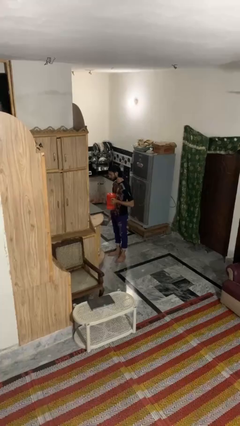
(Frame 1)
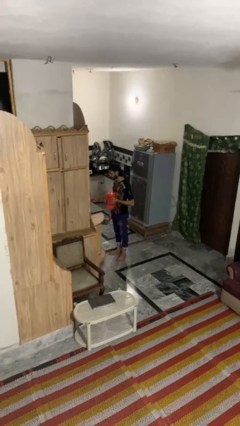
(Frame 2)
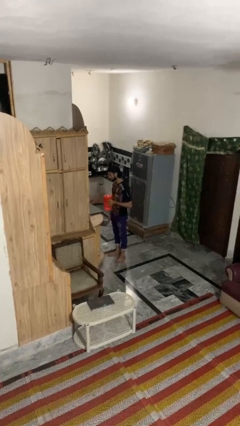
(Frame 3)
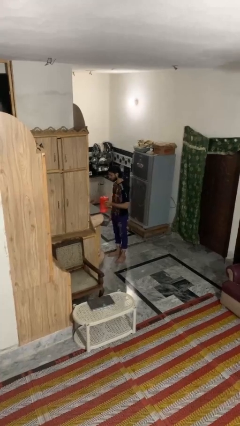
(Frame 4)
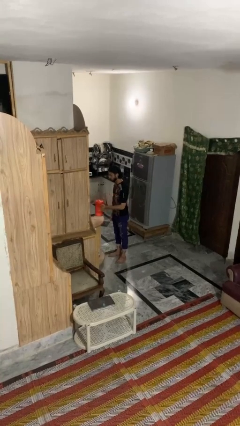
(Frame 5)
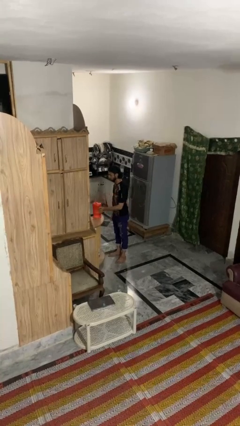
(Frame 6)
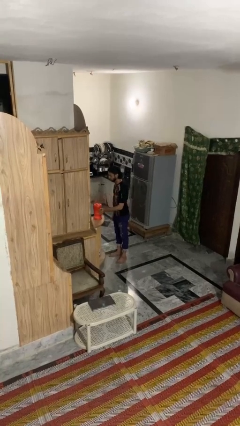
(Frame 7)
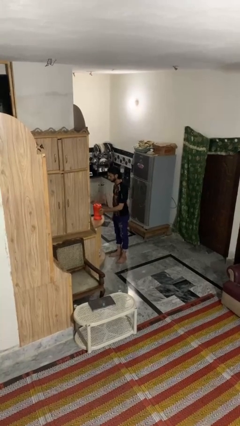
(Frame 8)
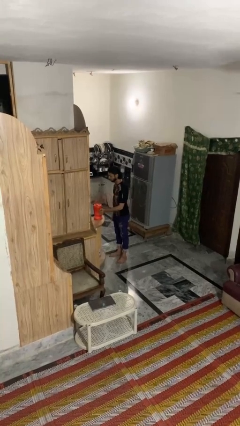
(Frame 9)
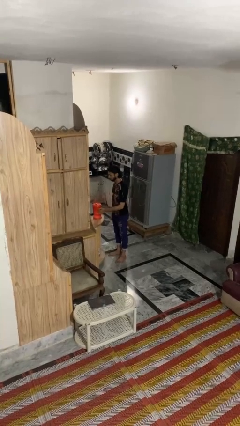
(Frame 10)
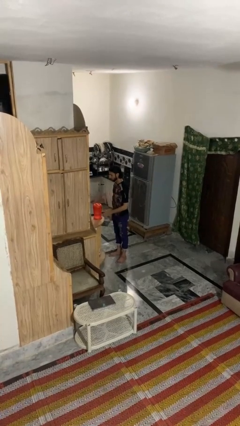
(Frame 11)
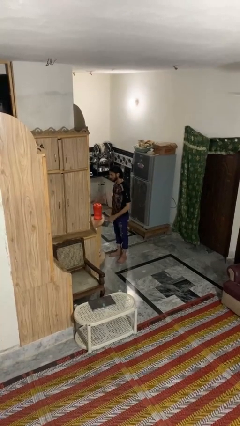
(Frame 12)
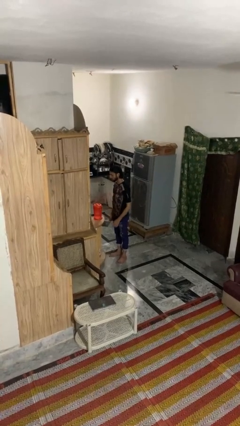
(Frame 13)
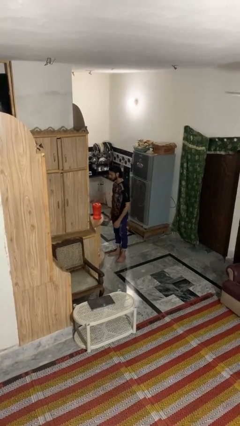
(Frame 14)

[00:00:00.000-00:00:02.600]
person puts down object on countertop

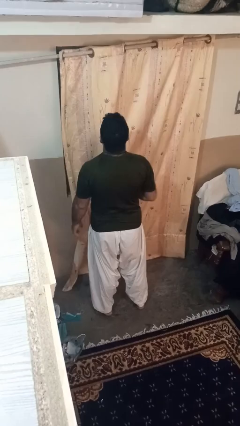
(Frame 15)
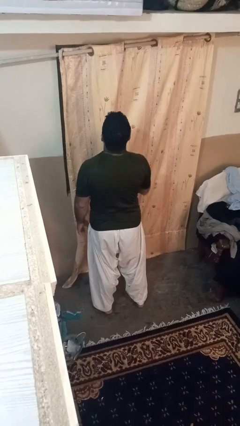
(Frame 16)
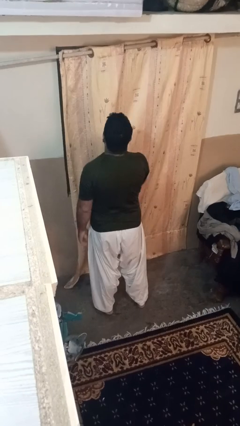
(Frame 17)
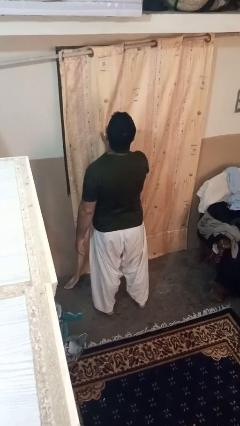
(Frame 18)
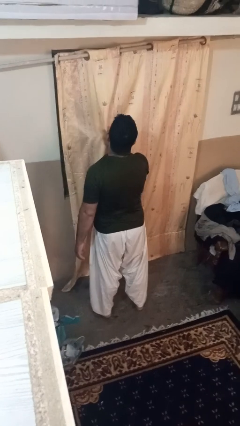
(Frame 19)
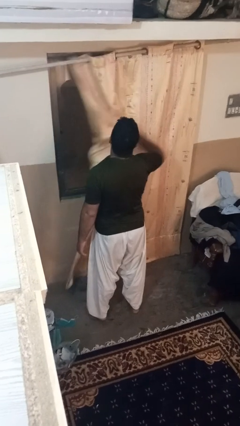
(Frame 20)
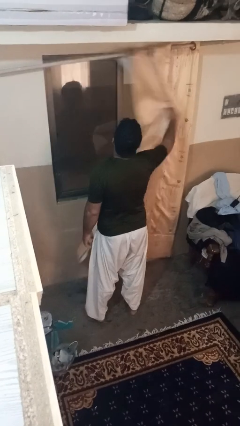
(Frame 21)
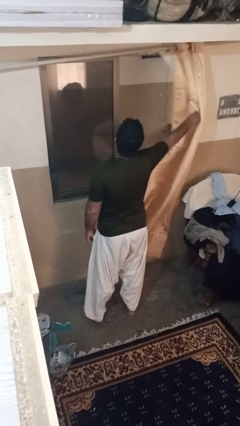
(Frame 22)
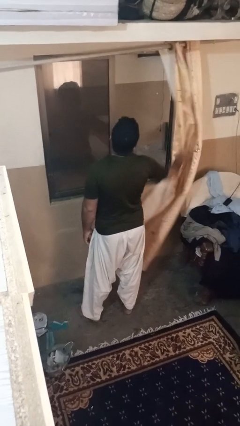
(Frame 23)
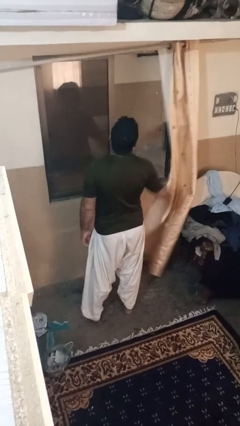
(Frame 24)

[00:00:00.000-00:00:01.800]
person opens curtains

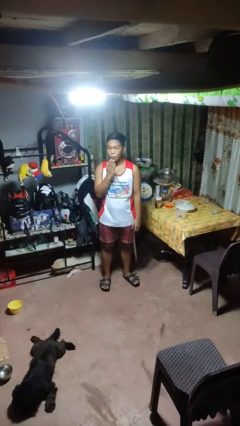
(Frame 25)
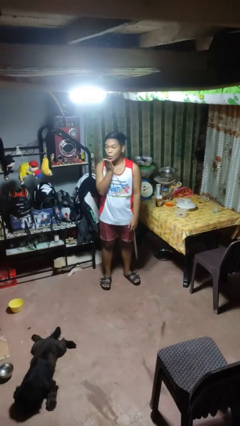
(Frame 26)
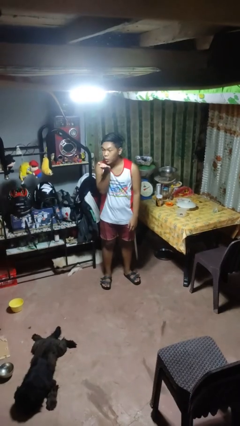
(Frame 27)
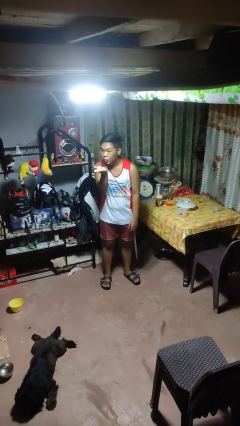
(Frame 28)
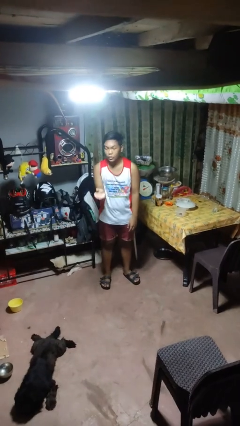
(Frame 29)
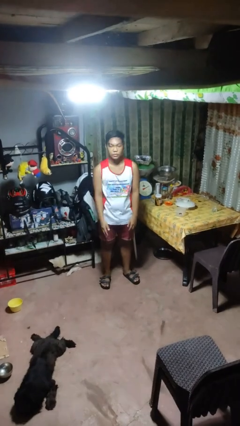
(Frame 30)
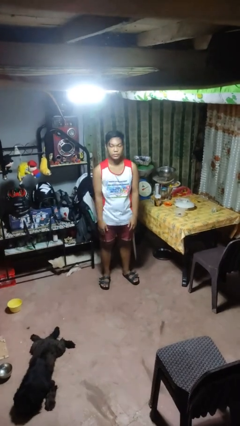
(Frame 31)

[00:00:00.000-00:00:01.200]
person gestures blow kiss

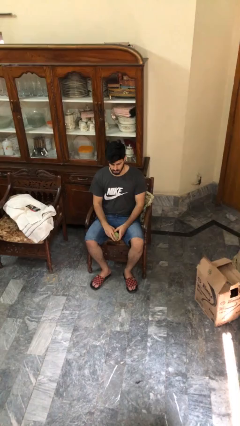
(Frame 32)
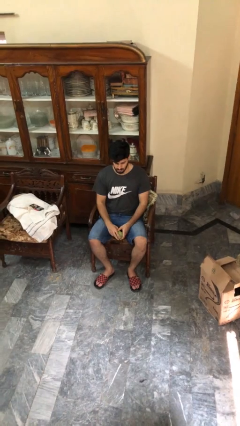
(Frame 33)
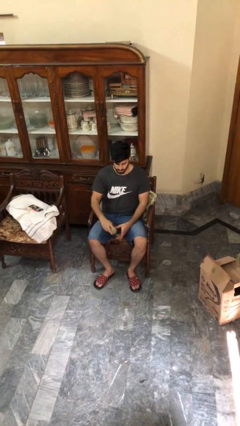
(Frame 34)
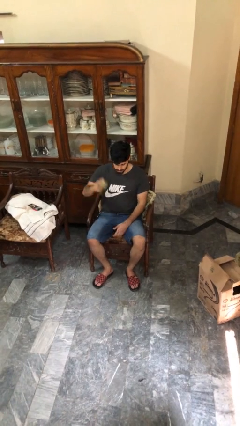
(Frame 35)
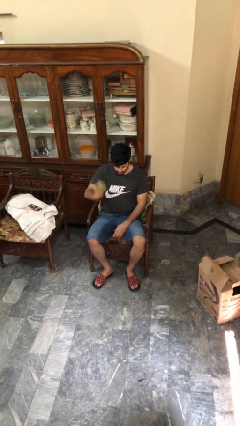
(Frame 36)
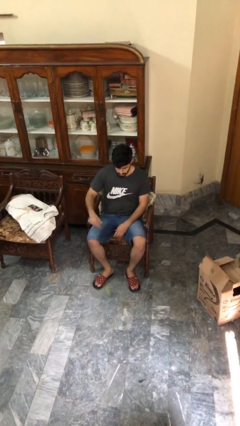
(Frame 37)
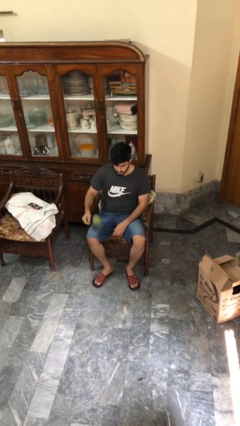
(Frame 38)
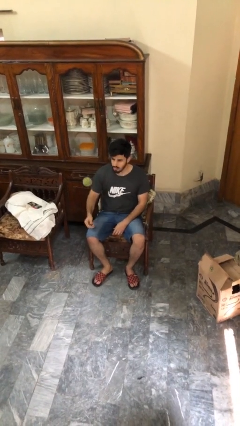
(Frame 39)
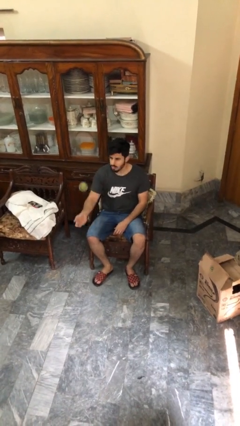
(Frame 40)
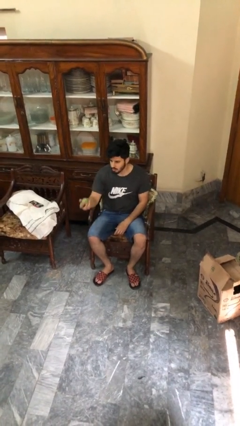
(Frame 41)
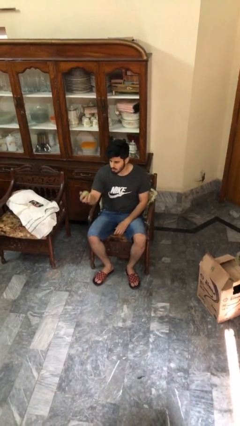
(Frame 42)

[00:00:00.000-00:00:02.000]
person bounces ball on floor

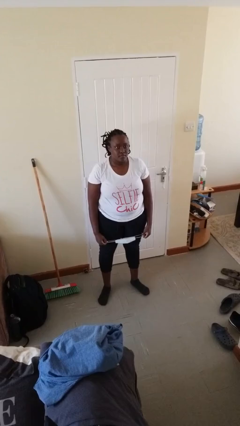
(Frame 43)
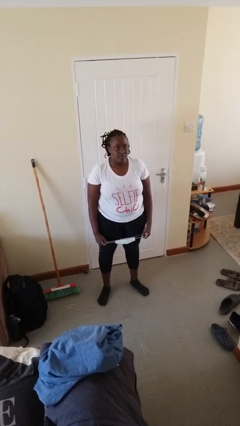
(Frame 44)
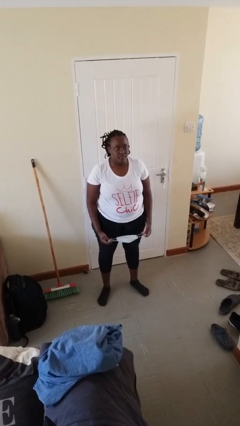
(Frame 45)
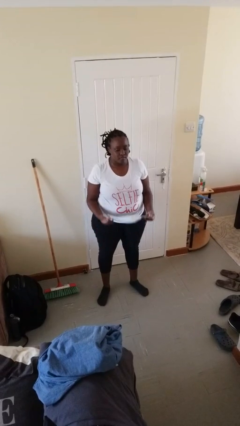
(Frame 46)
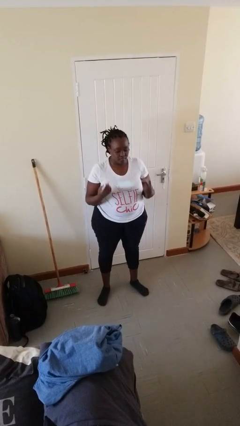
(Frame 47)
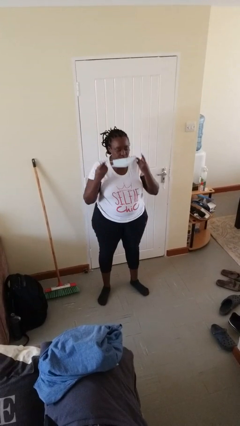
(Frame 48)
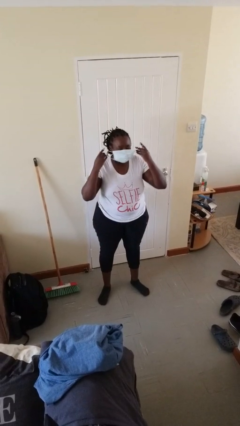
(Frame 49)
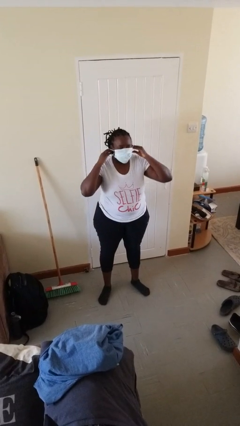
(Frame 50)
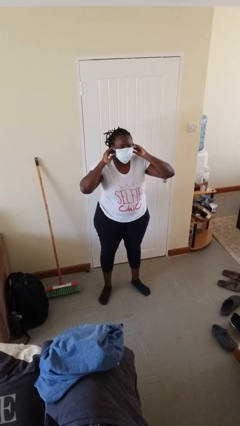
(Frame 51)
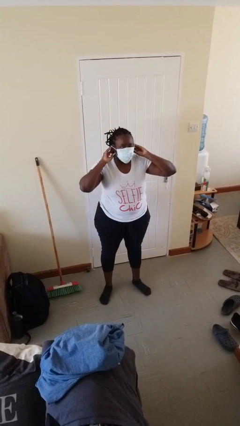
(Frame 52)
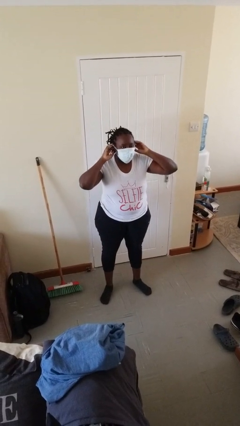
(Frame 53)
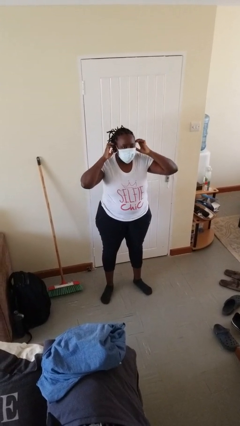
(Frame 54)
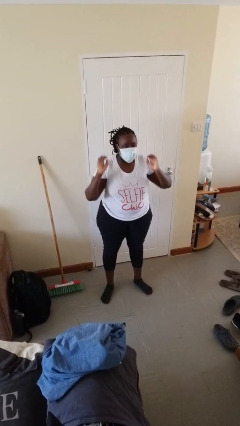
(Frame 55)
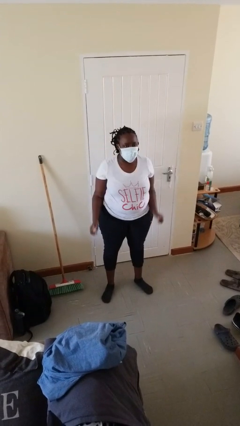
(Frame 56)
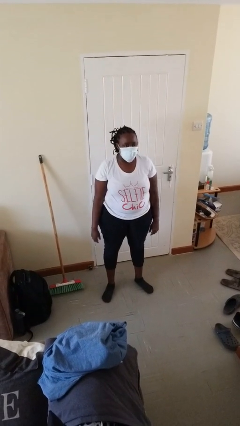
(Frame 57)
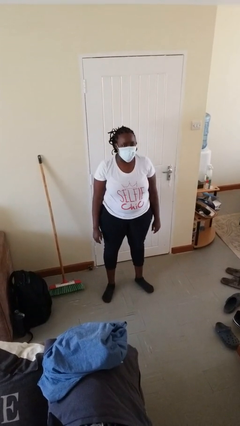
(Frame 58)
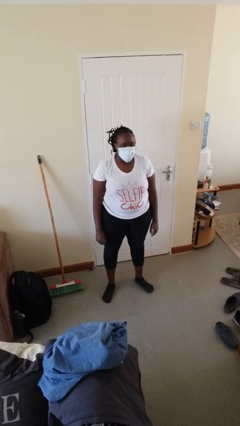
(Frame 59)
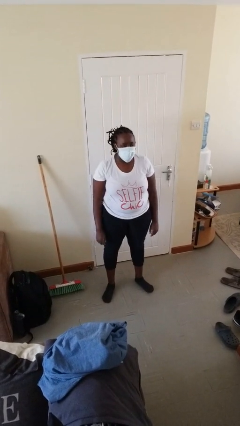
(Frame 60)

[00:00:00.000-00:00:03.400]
person puts on facemask

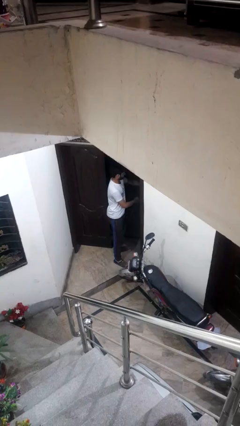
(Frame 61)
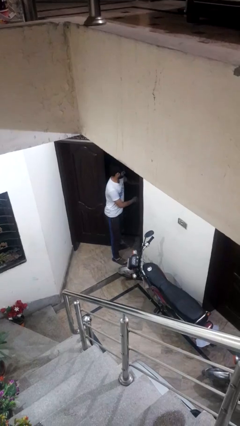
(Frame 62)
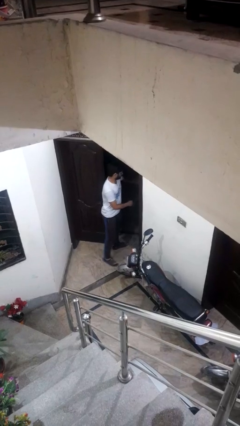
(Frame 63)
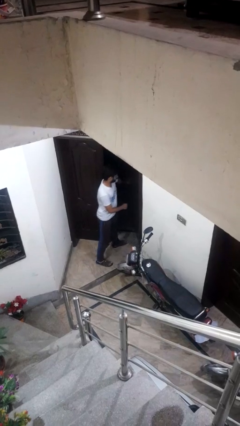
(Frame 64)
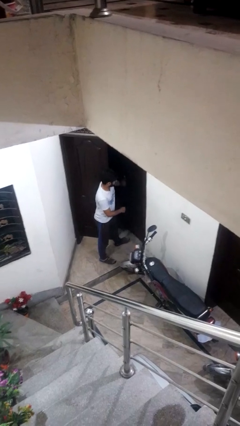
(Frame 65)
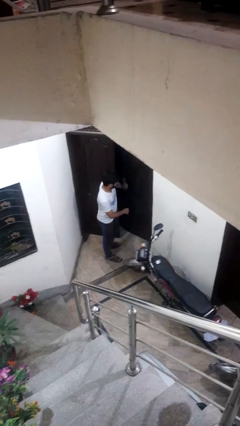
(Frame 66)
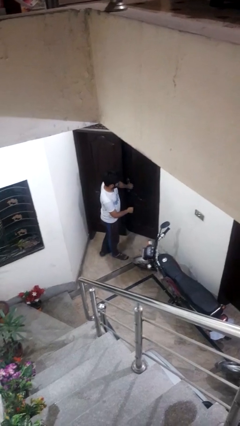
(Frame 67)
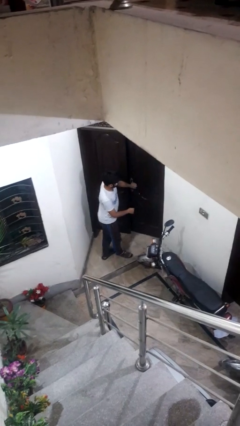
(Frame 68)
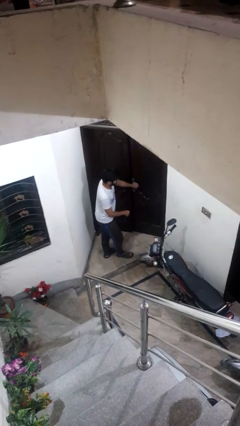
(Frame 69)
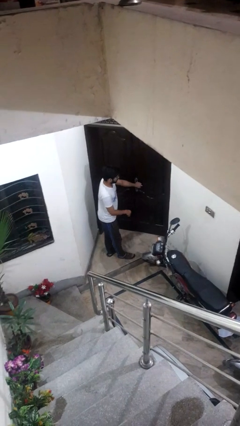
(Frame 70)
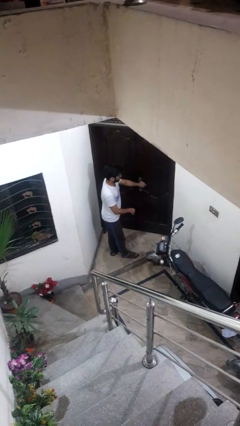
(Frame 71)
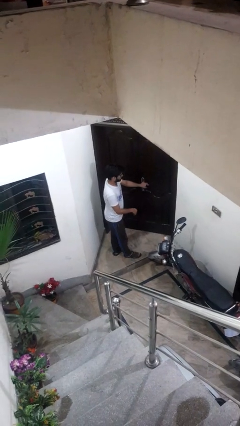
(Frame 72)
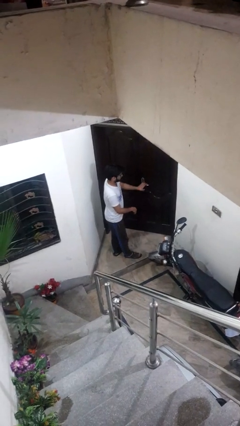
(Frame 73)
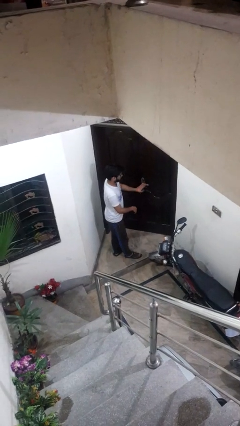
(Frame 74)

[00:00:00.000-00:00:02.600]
person closes facility door

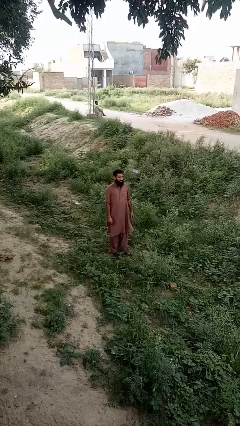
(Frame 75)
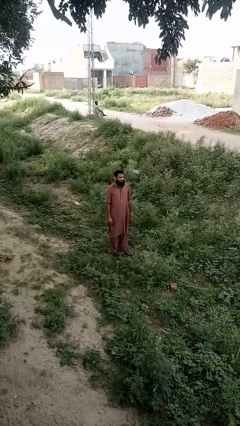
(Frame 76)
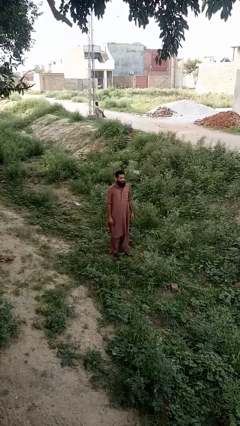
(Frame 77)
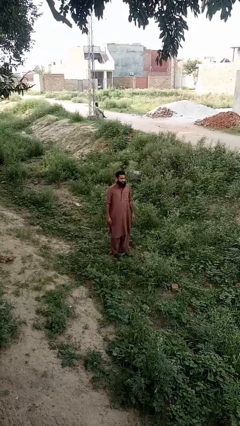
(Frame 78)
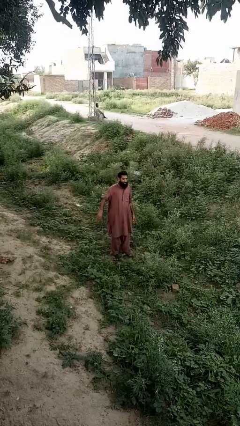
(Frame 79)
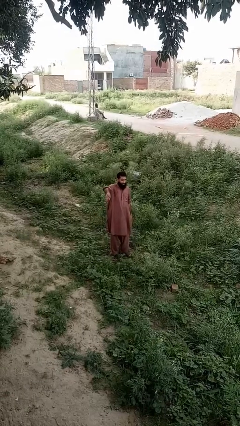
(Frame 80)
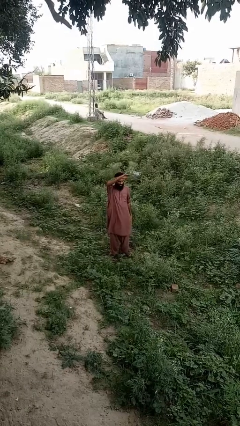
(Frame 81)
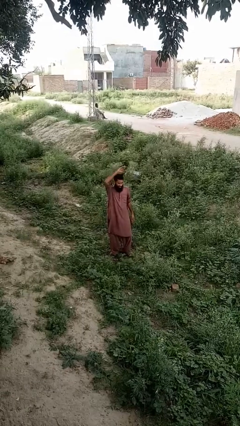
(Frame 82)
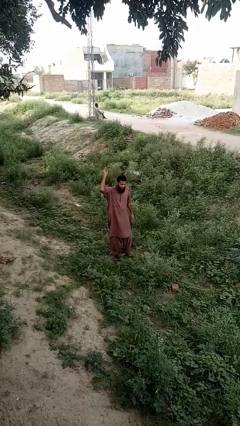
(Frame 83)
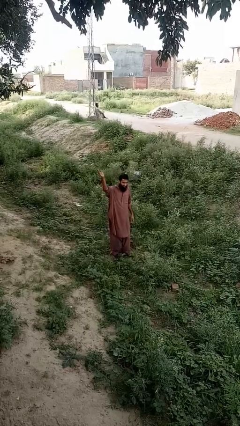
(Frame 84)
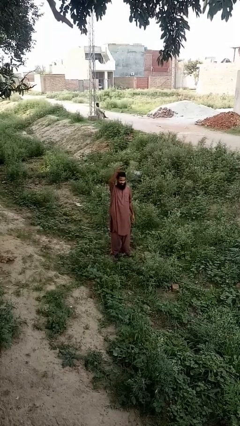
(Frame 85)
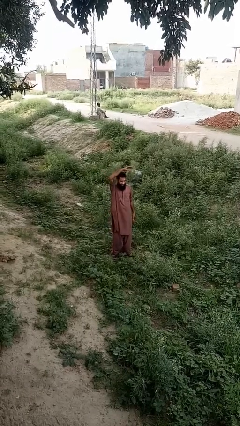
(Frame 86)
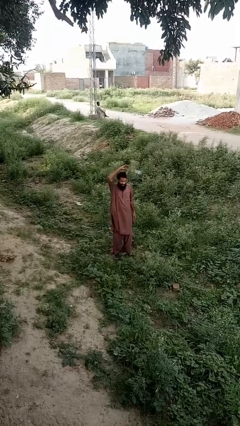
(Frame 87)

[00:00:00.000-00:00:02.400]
person dances in place

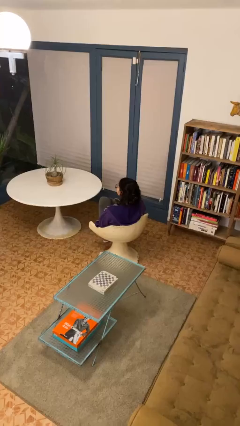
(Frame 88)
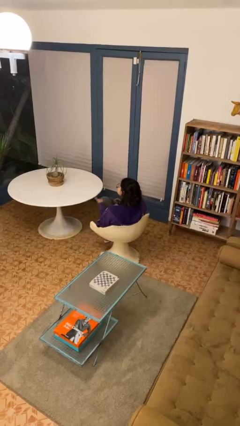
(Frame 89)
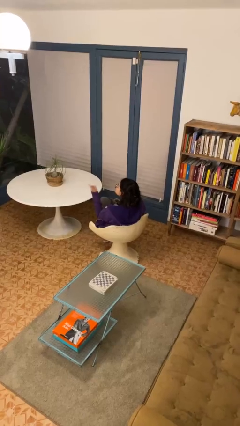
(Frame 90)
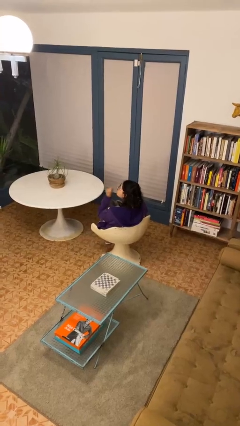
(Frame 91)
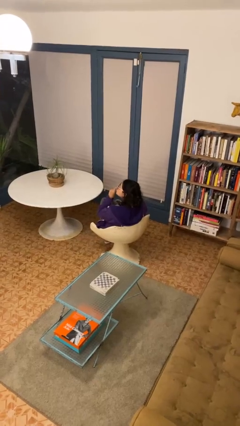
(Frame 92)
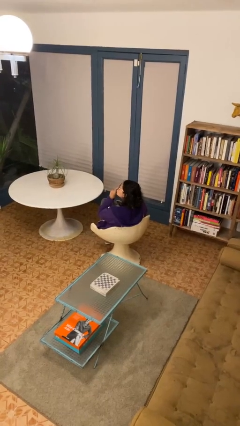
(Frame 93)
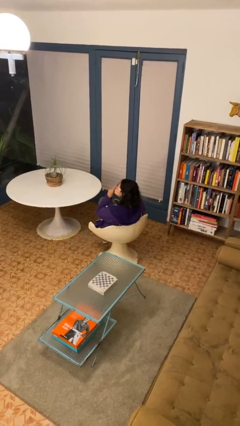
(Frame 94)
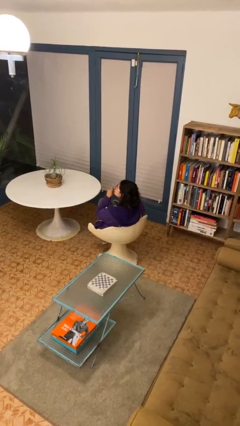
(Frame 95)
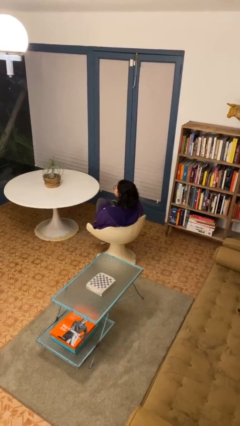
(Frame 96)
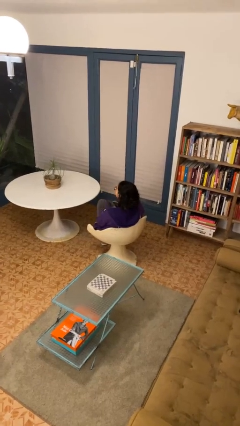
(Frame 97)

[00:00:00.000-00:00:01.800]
person gestures be quiet
